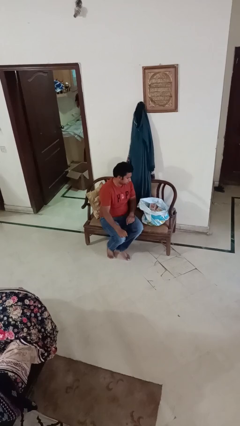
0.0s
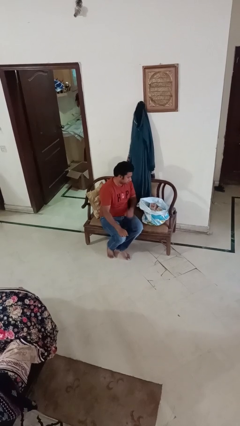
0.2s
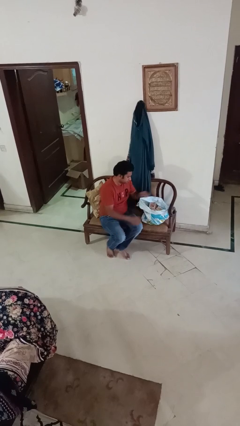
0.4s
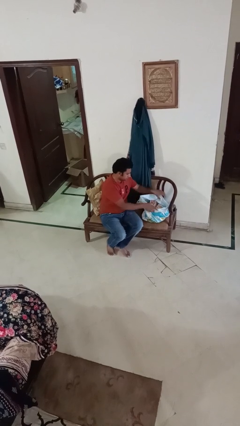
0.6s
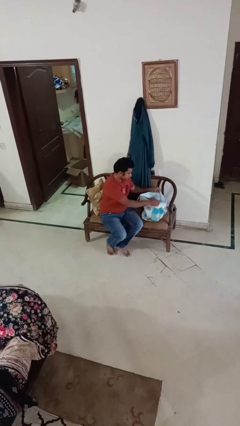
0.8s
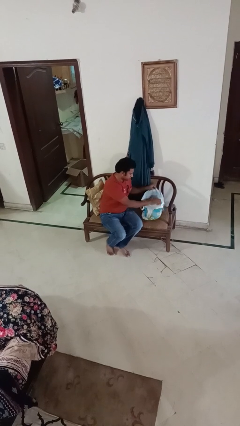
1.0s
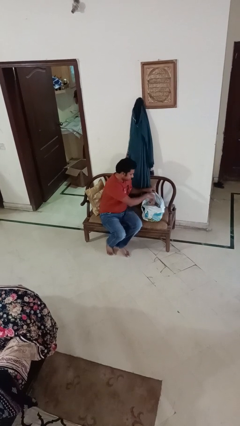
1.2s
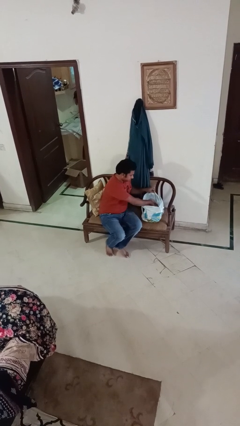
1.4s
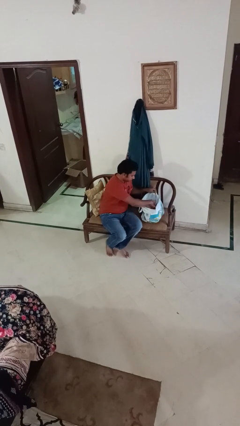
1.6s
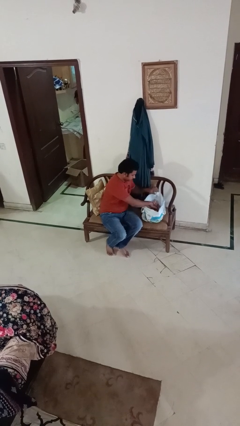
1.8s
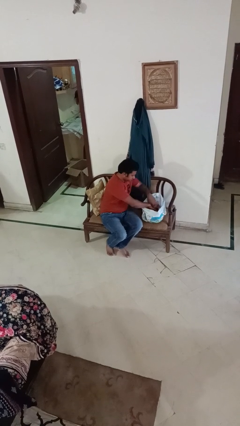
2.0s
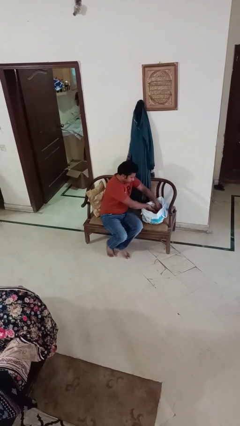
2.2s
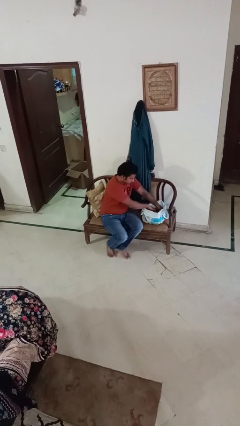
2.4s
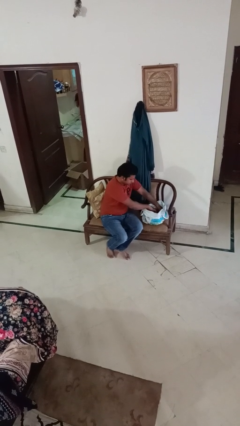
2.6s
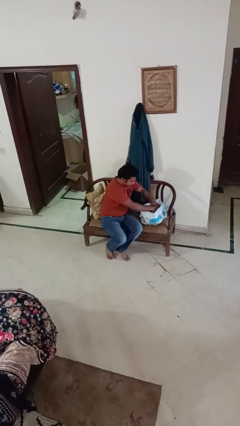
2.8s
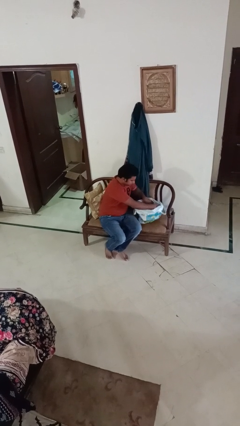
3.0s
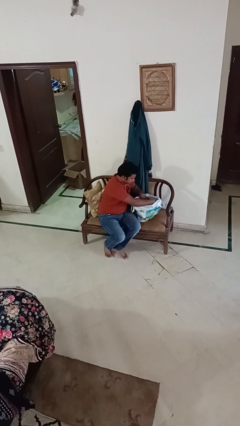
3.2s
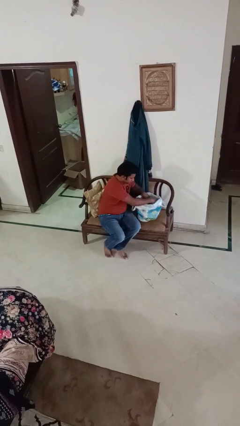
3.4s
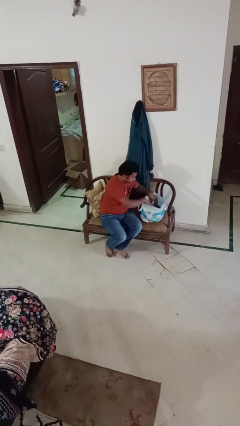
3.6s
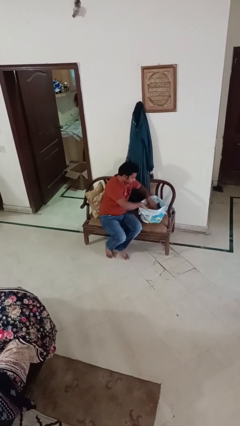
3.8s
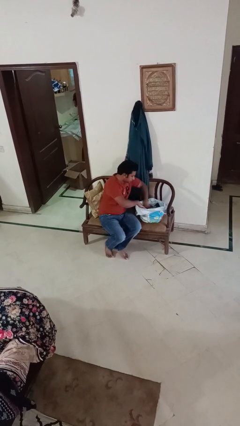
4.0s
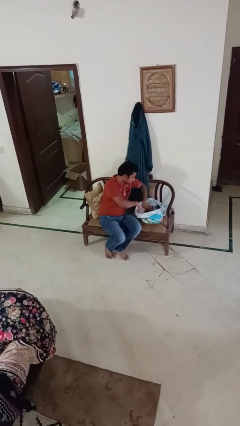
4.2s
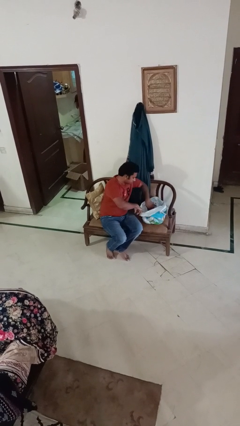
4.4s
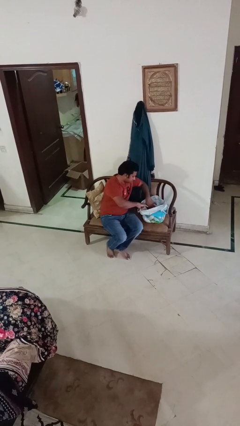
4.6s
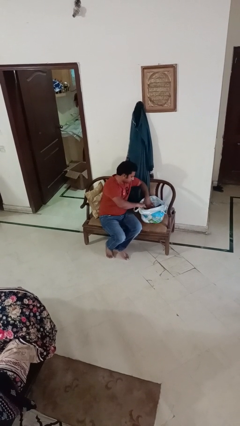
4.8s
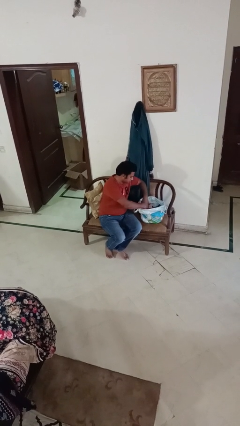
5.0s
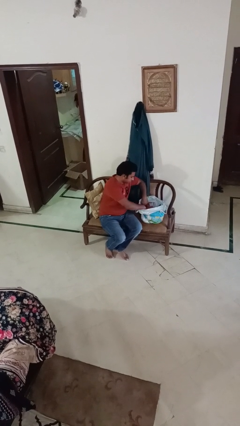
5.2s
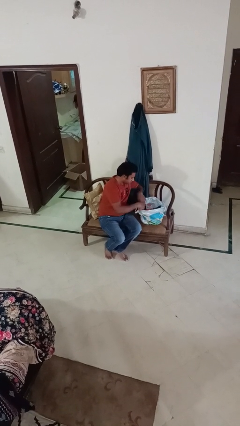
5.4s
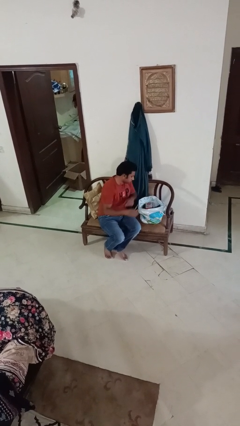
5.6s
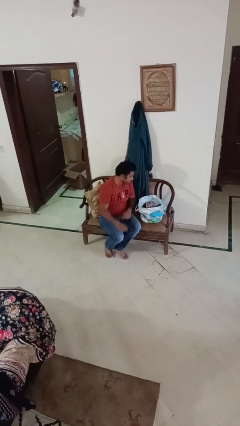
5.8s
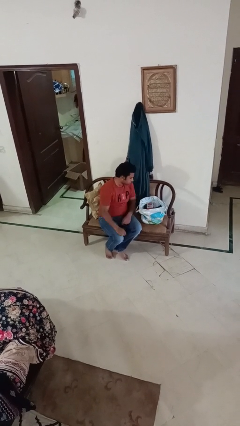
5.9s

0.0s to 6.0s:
person searches in bag

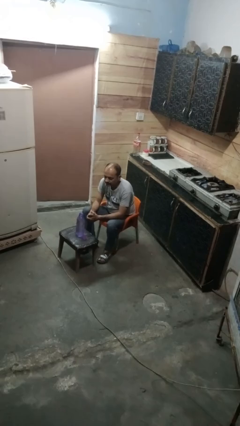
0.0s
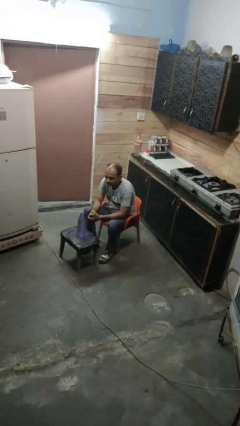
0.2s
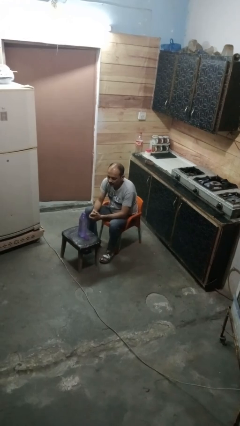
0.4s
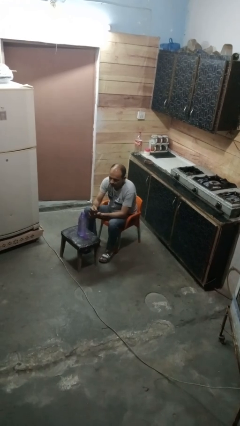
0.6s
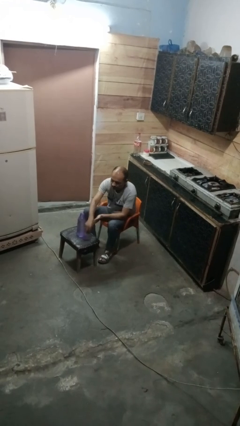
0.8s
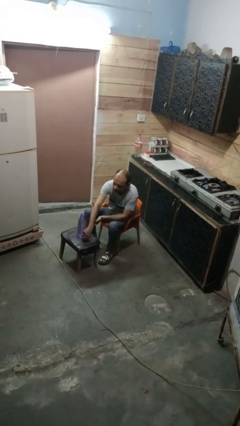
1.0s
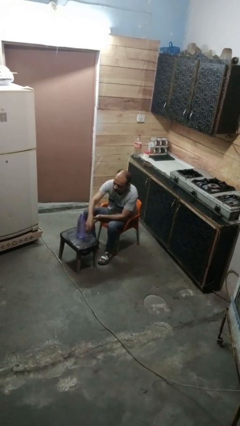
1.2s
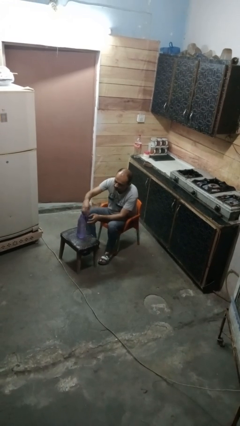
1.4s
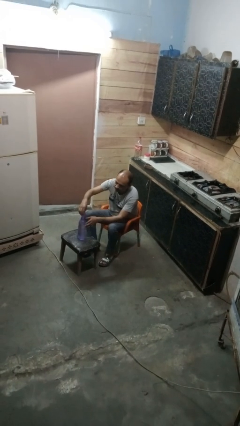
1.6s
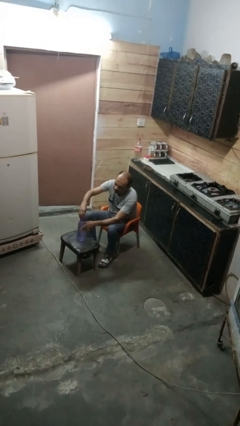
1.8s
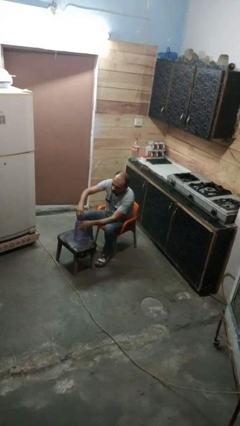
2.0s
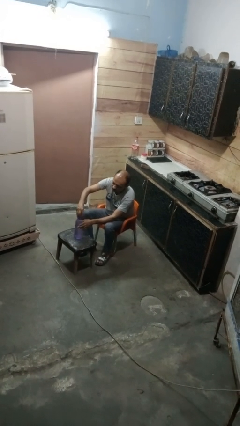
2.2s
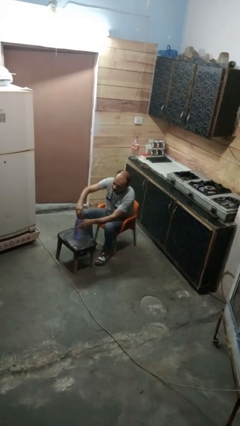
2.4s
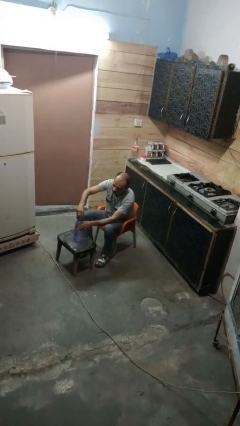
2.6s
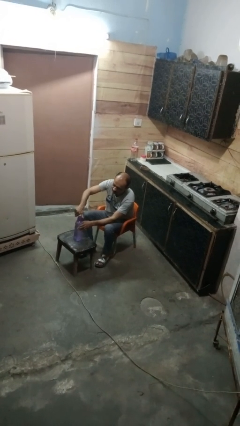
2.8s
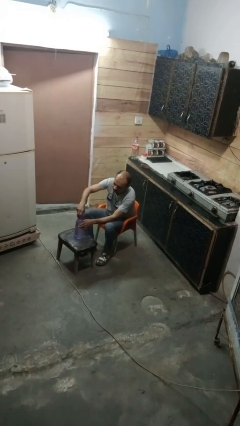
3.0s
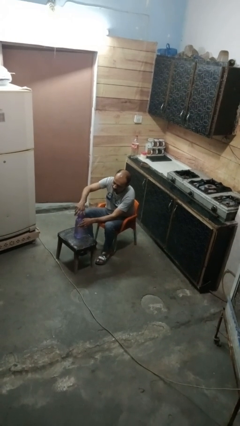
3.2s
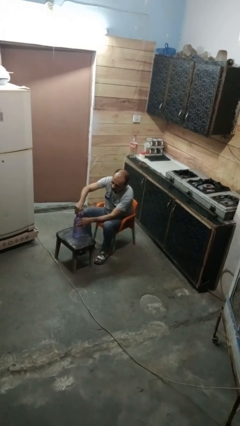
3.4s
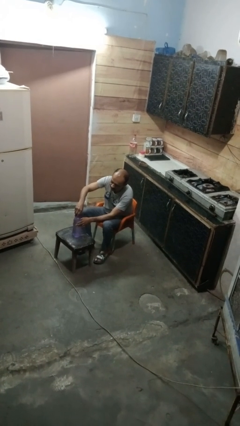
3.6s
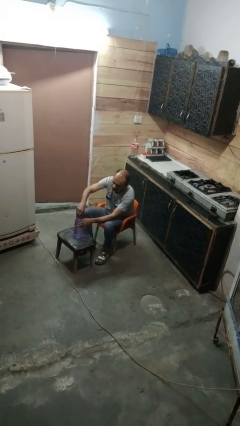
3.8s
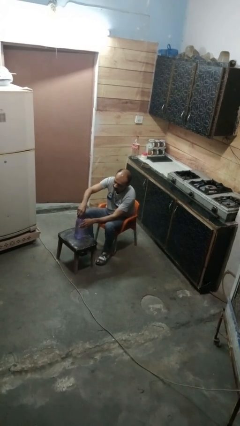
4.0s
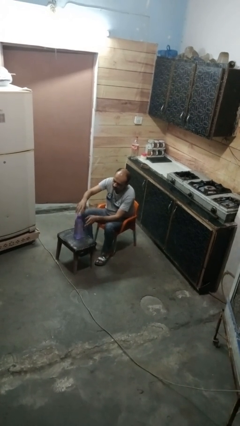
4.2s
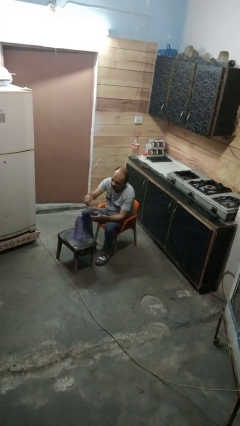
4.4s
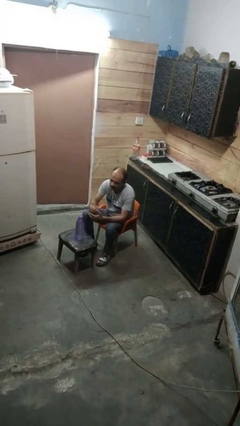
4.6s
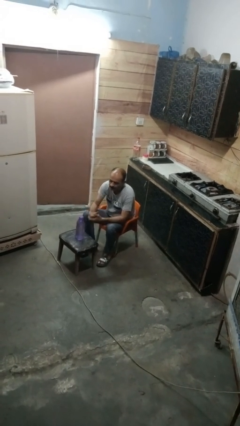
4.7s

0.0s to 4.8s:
person screws lid to bottle

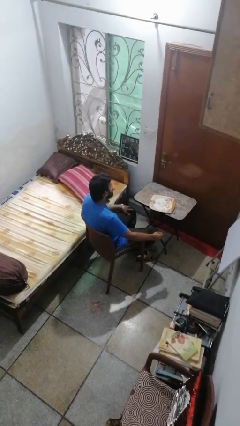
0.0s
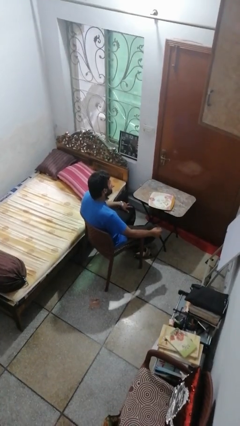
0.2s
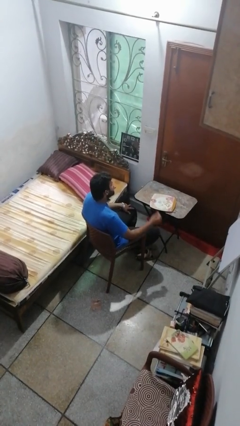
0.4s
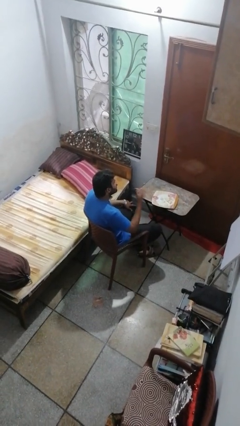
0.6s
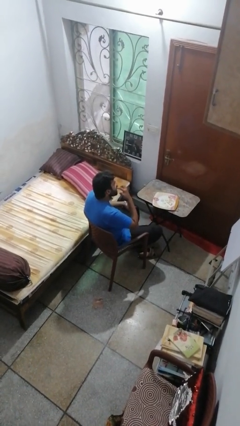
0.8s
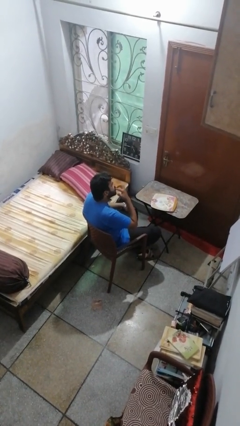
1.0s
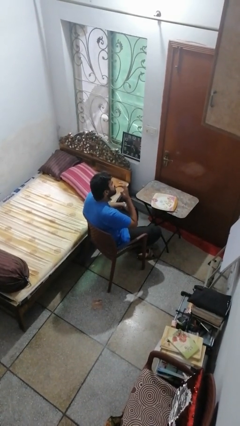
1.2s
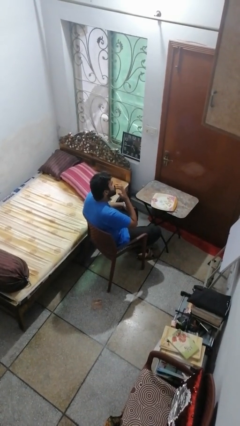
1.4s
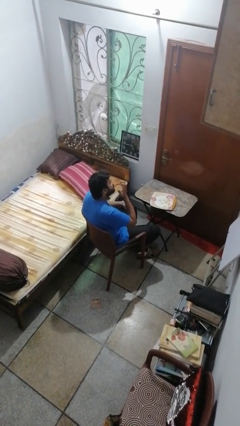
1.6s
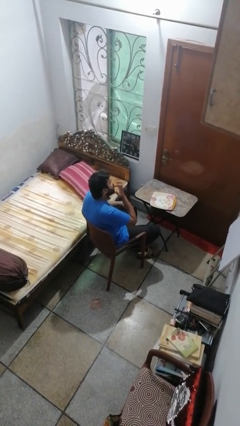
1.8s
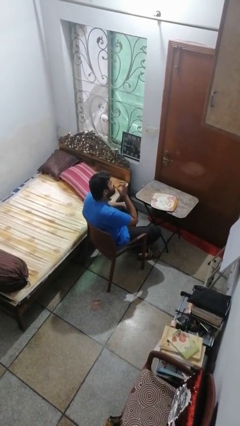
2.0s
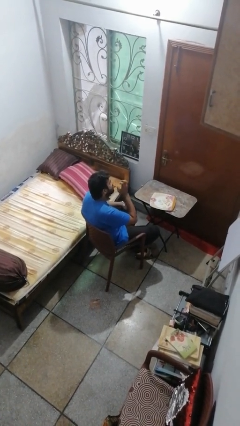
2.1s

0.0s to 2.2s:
person licks fingers

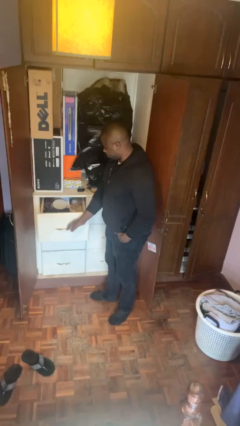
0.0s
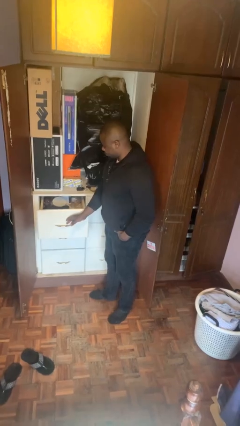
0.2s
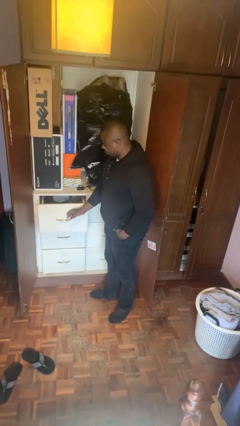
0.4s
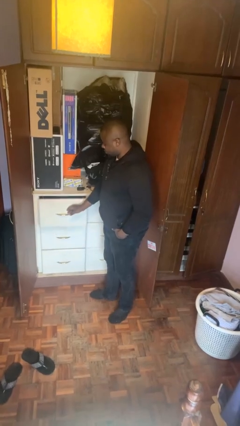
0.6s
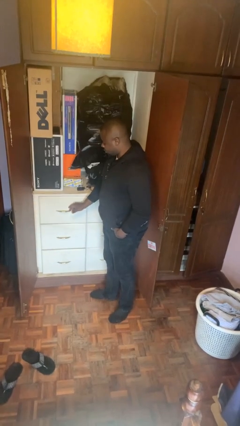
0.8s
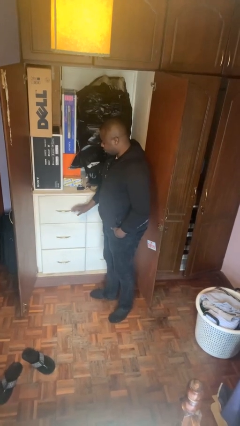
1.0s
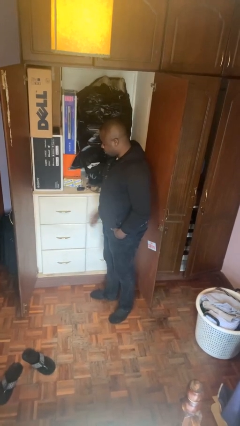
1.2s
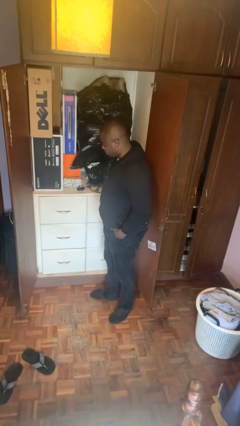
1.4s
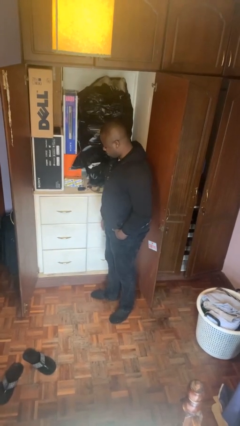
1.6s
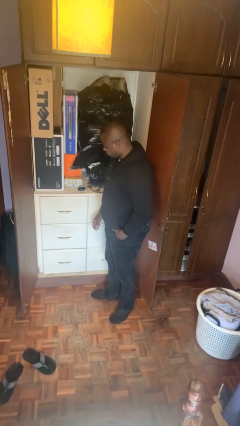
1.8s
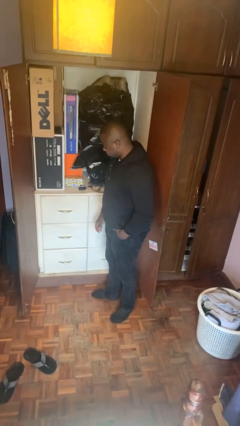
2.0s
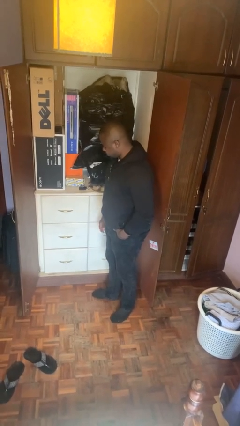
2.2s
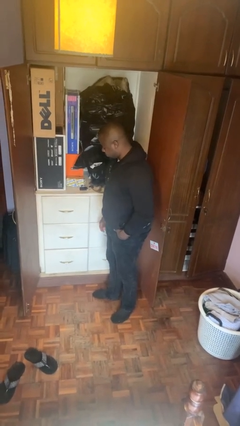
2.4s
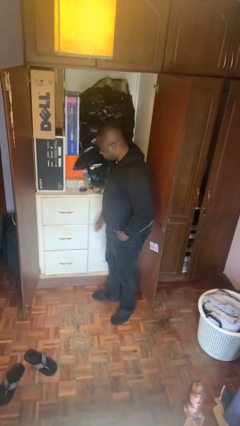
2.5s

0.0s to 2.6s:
person closes dresser drawer

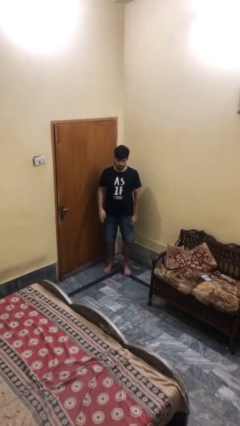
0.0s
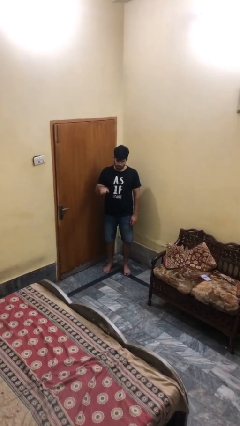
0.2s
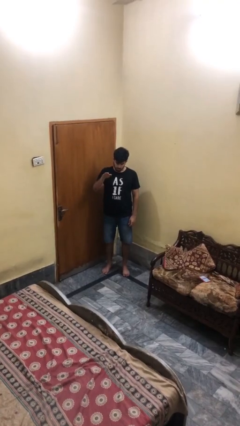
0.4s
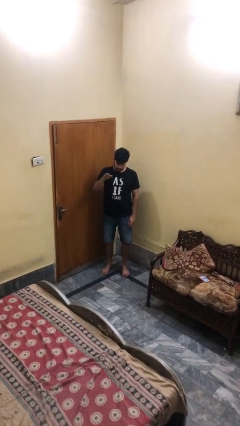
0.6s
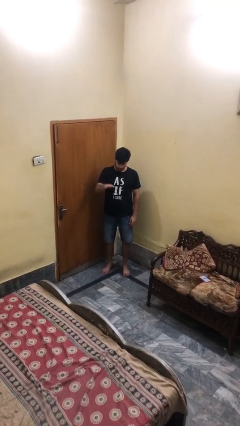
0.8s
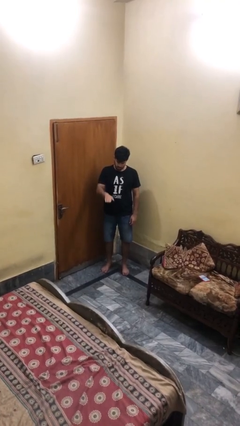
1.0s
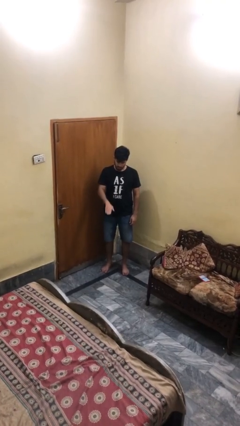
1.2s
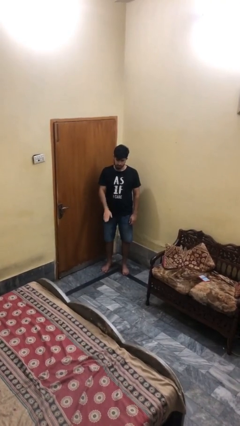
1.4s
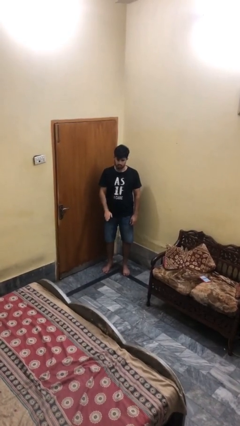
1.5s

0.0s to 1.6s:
person gestures swipe down
